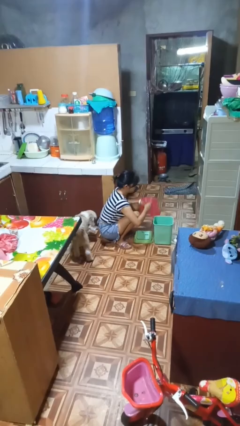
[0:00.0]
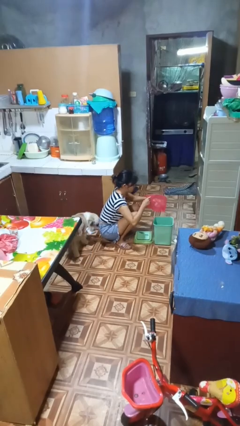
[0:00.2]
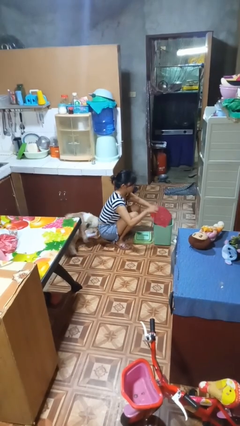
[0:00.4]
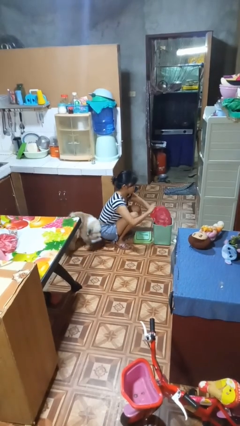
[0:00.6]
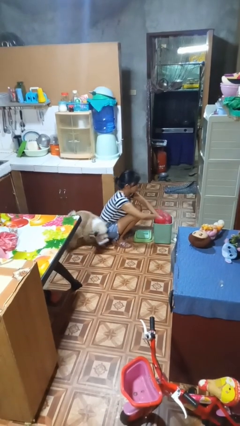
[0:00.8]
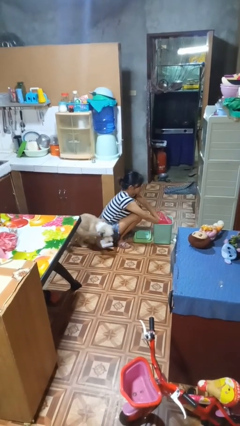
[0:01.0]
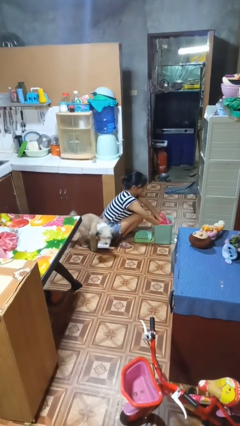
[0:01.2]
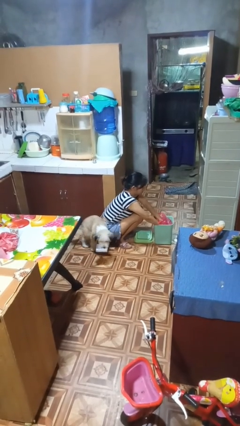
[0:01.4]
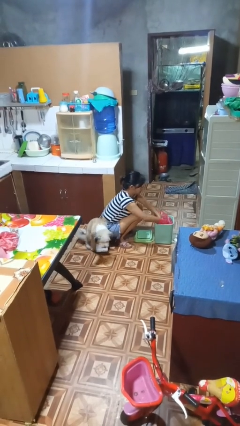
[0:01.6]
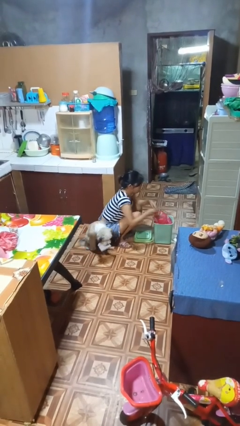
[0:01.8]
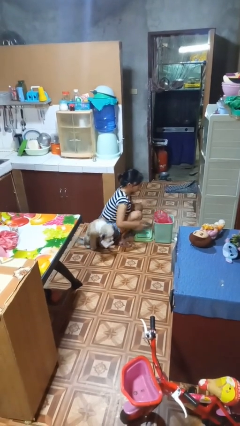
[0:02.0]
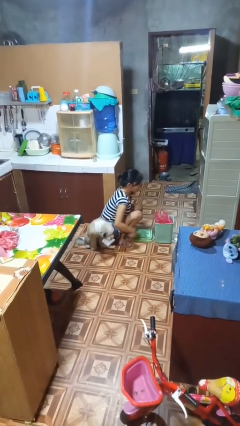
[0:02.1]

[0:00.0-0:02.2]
person inserts trashbag into trashcan

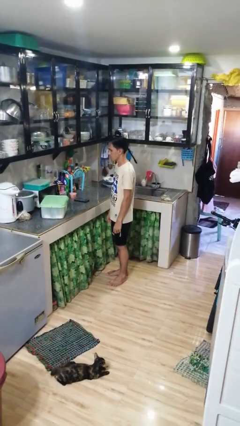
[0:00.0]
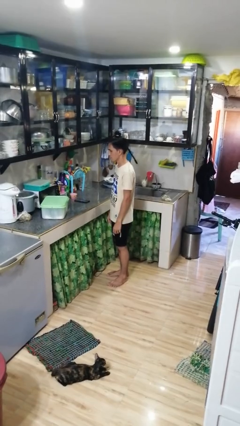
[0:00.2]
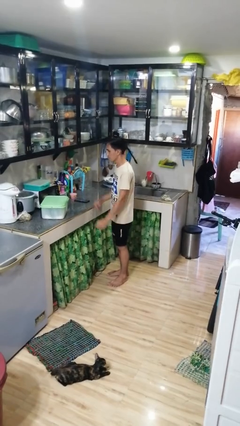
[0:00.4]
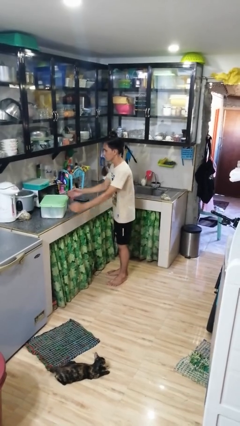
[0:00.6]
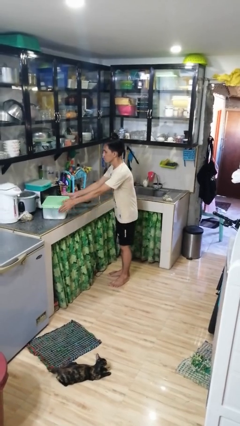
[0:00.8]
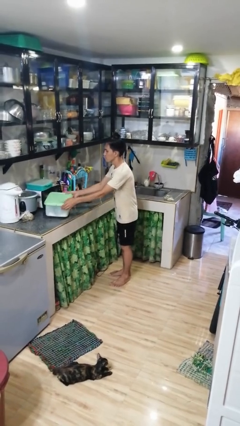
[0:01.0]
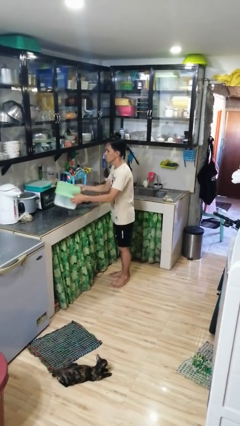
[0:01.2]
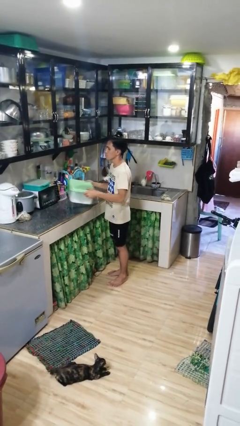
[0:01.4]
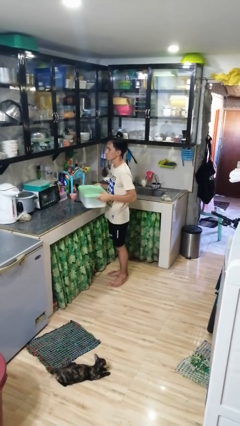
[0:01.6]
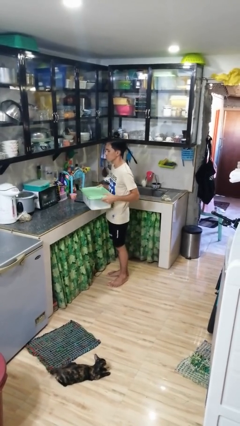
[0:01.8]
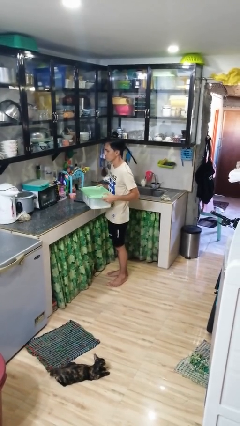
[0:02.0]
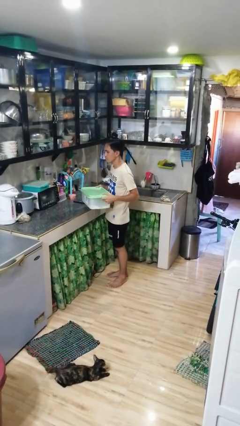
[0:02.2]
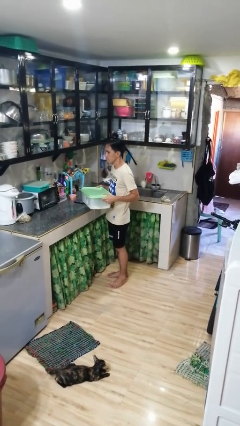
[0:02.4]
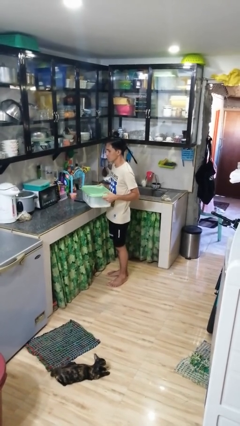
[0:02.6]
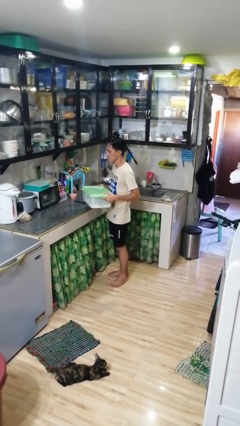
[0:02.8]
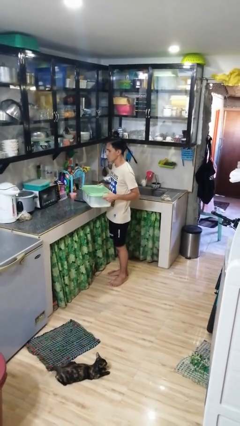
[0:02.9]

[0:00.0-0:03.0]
person picks up object from countertop

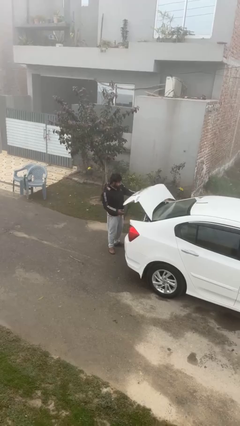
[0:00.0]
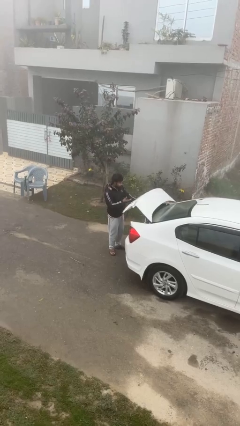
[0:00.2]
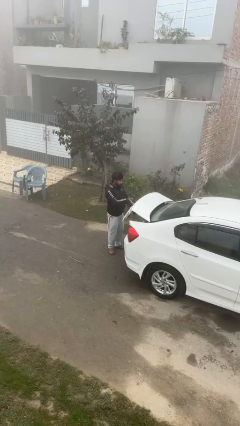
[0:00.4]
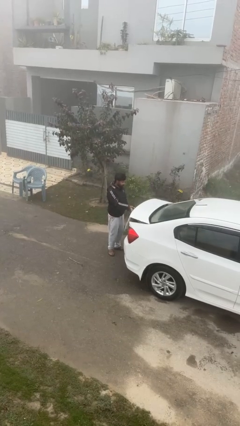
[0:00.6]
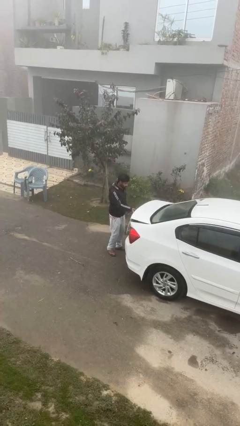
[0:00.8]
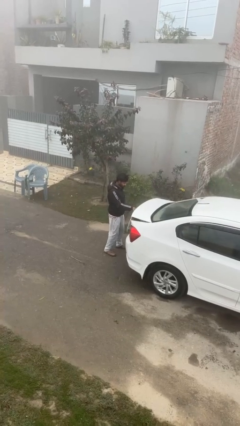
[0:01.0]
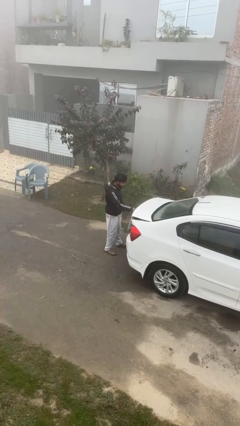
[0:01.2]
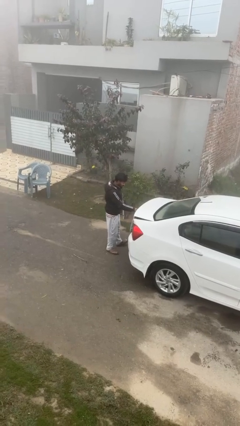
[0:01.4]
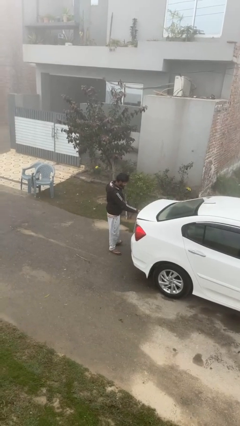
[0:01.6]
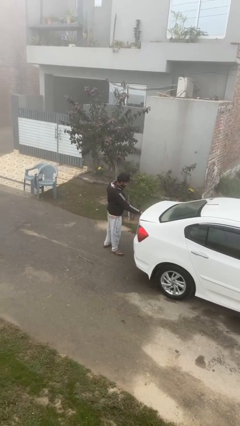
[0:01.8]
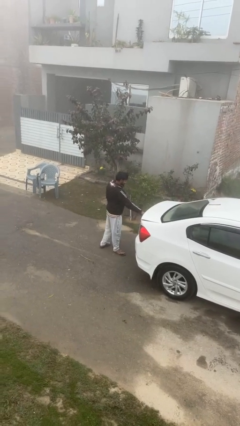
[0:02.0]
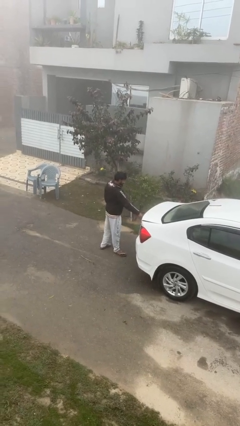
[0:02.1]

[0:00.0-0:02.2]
person closes car trunk

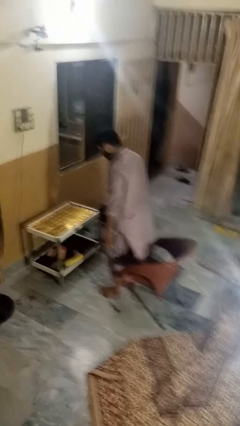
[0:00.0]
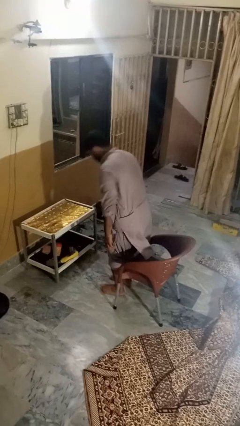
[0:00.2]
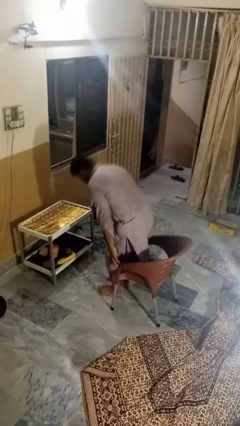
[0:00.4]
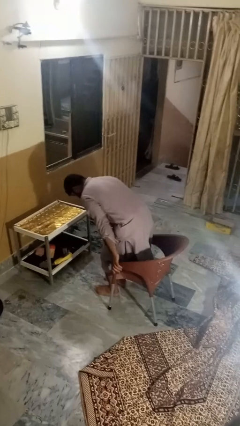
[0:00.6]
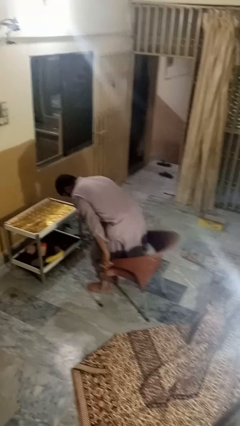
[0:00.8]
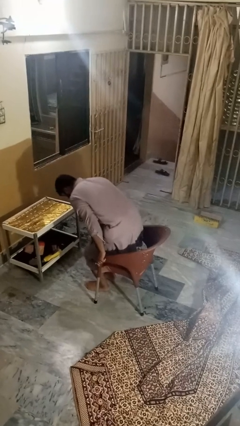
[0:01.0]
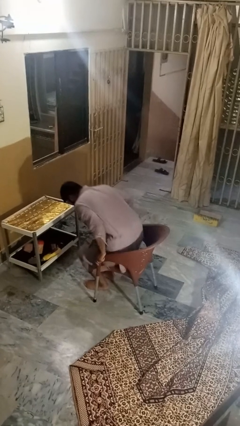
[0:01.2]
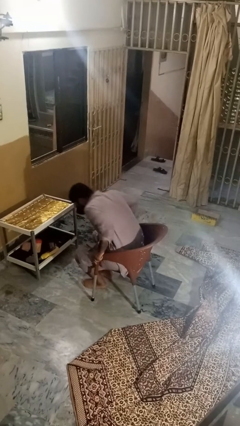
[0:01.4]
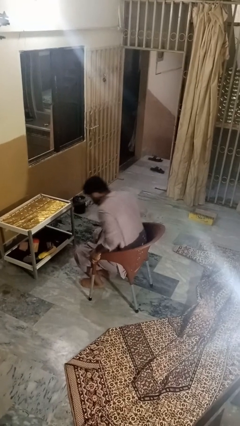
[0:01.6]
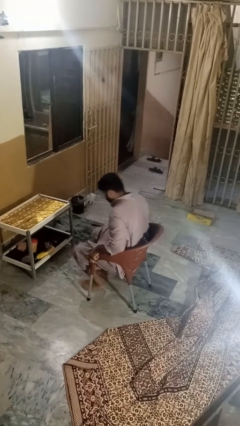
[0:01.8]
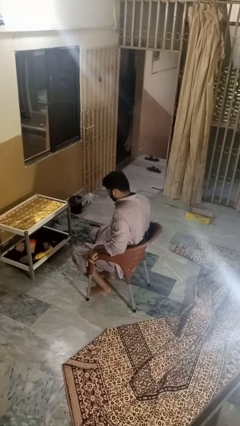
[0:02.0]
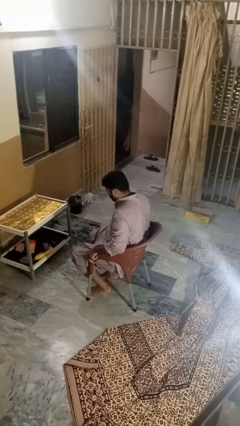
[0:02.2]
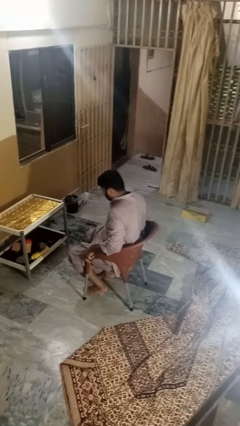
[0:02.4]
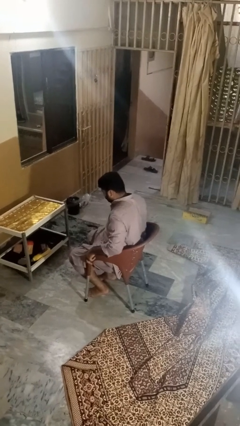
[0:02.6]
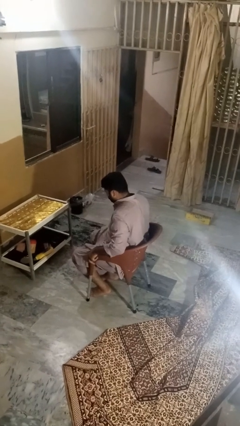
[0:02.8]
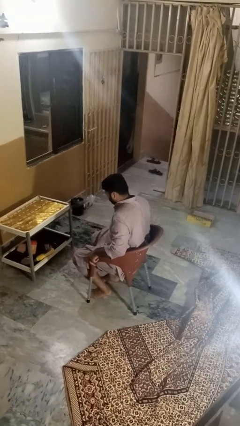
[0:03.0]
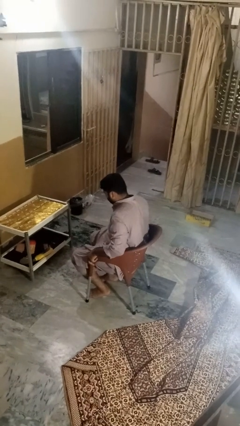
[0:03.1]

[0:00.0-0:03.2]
person sits down

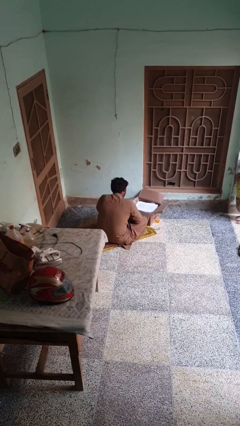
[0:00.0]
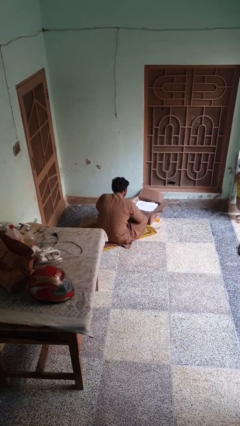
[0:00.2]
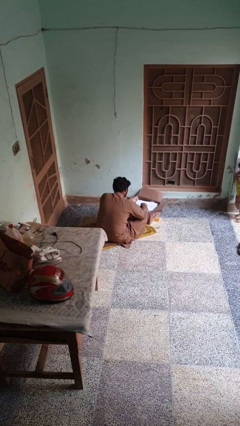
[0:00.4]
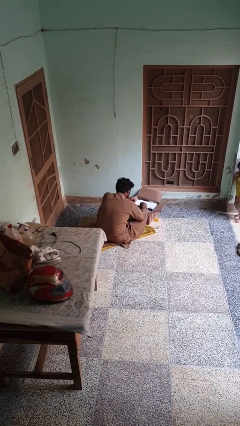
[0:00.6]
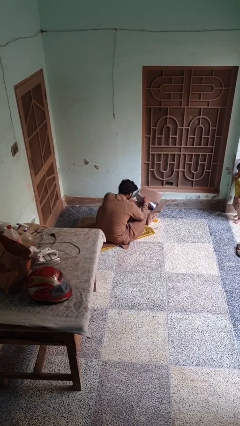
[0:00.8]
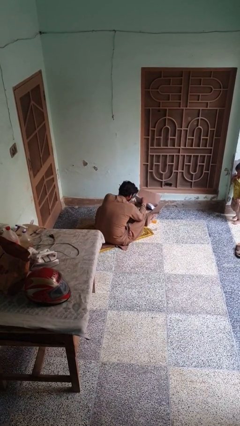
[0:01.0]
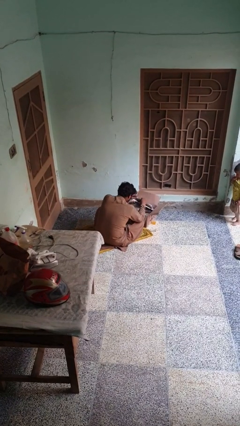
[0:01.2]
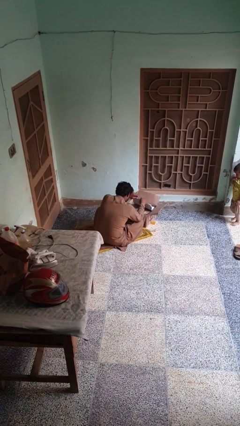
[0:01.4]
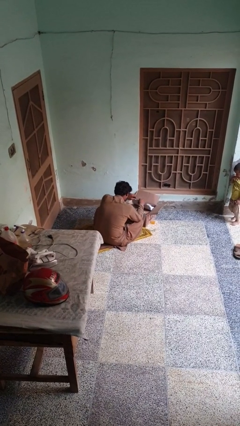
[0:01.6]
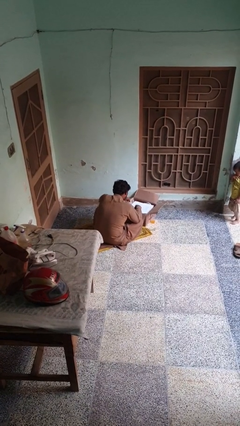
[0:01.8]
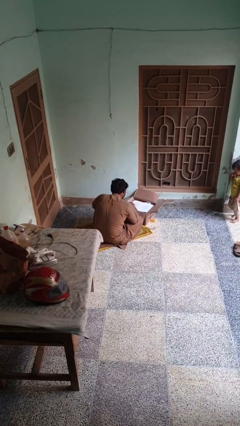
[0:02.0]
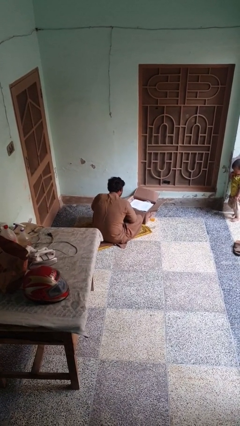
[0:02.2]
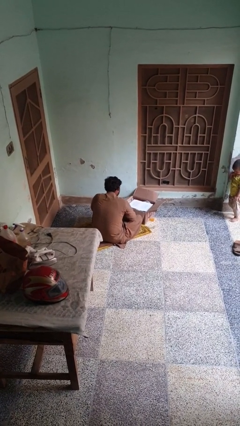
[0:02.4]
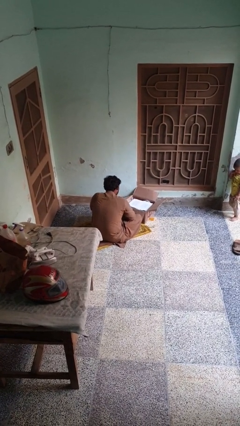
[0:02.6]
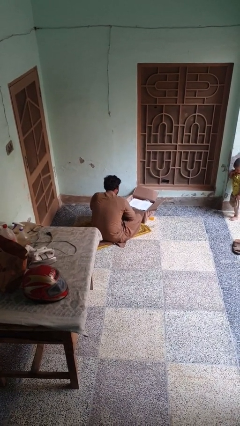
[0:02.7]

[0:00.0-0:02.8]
person searches in box

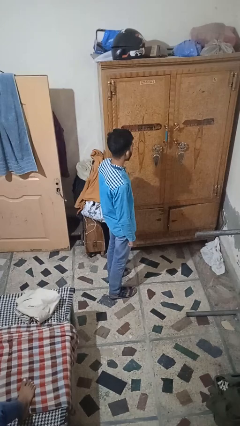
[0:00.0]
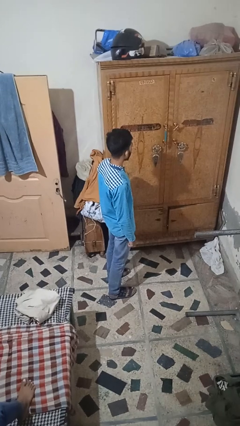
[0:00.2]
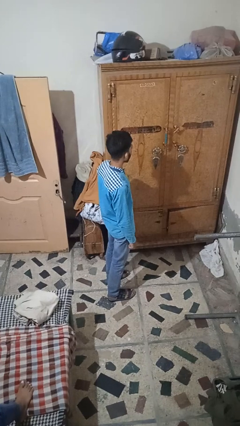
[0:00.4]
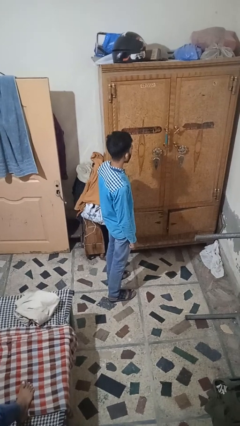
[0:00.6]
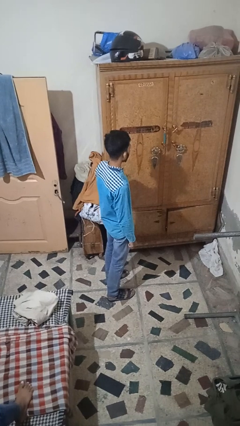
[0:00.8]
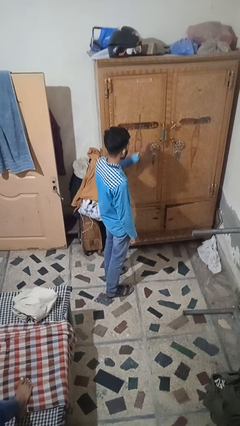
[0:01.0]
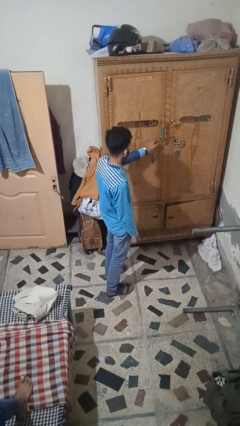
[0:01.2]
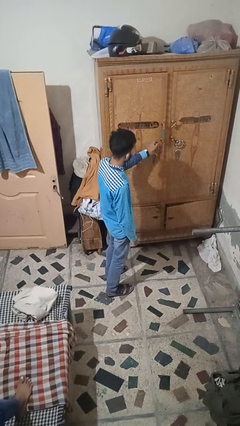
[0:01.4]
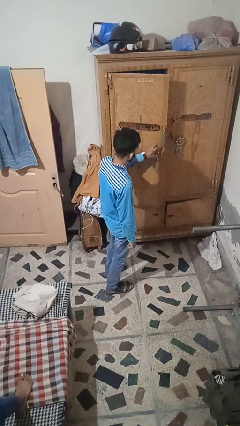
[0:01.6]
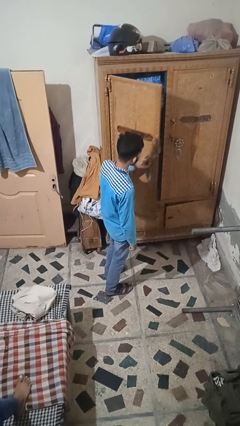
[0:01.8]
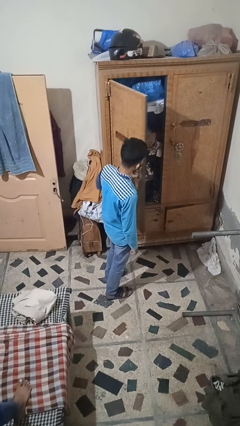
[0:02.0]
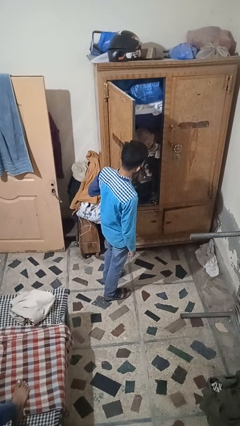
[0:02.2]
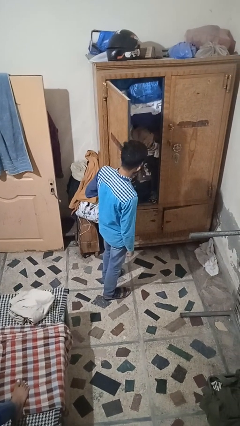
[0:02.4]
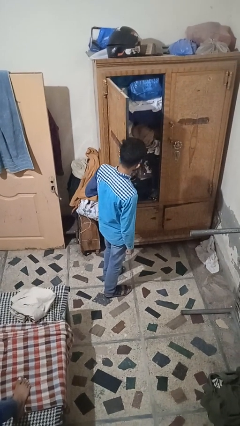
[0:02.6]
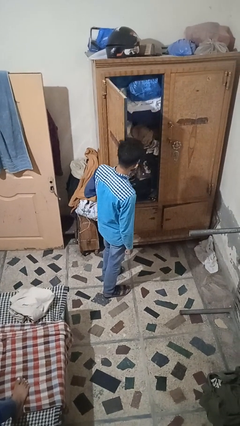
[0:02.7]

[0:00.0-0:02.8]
person opens closet door

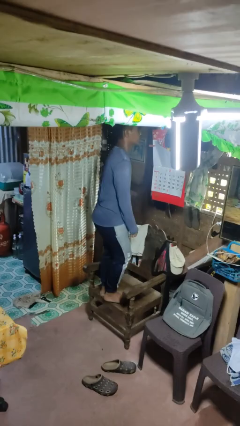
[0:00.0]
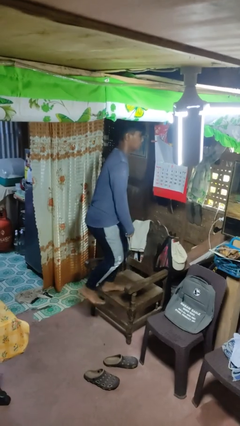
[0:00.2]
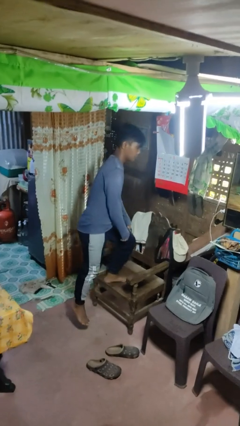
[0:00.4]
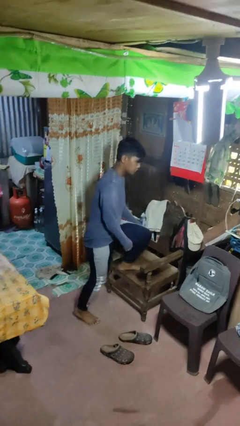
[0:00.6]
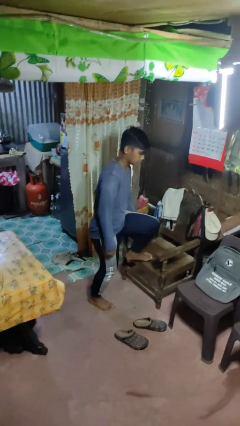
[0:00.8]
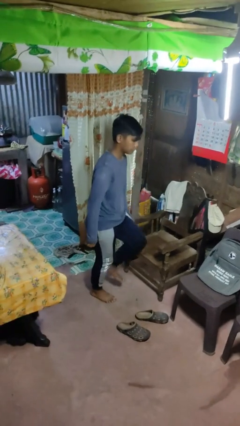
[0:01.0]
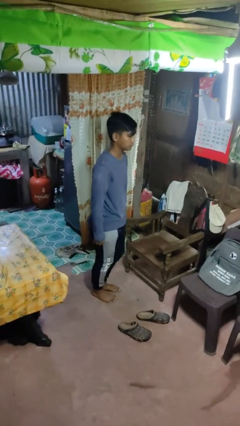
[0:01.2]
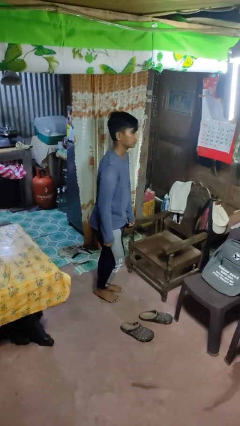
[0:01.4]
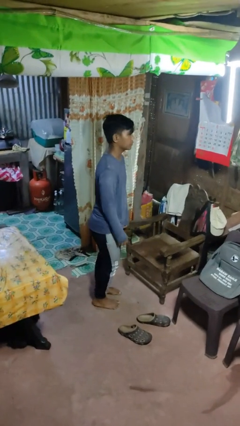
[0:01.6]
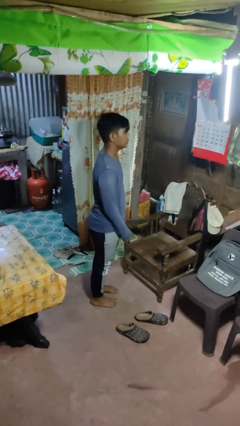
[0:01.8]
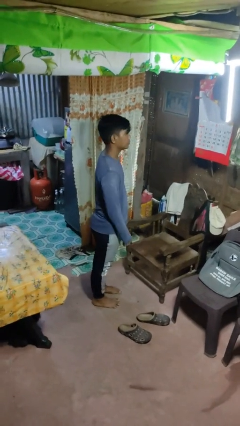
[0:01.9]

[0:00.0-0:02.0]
person climbs off chair
